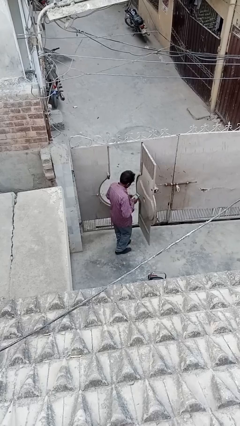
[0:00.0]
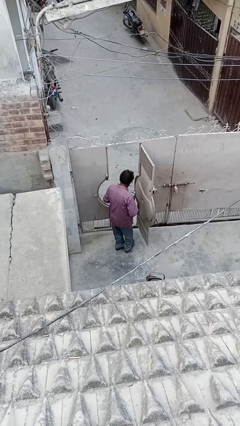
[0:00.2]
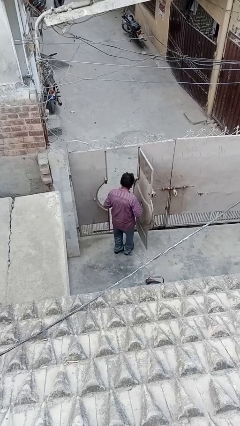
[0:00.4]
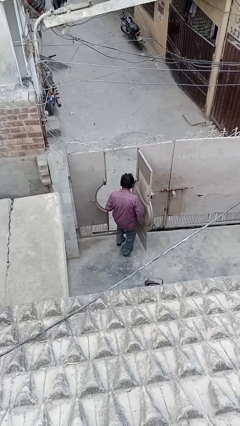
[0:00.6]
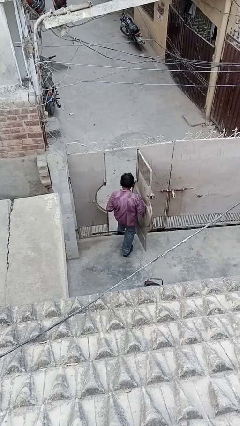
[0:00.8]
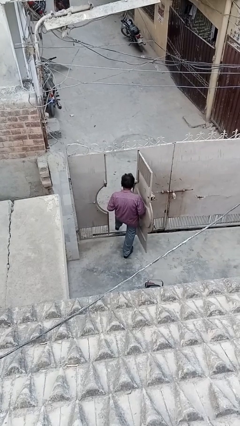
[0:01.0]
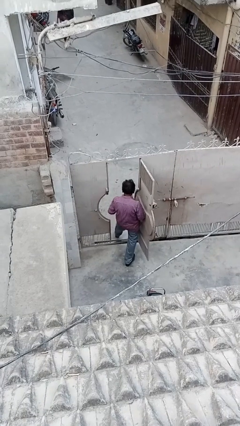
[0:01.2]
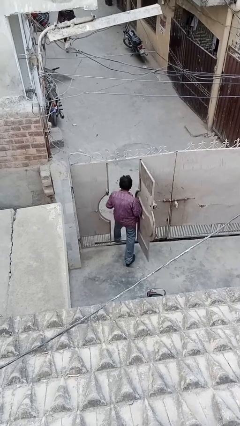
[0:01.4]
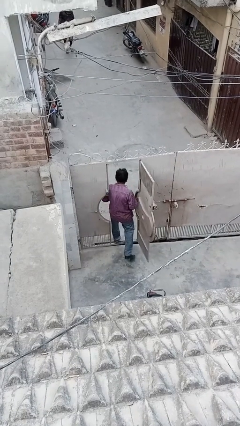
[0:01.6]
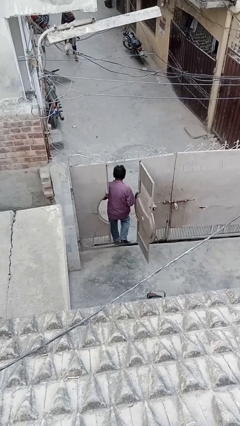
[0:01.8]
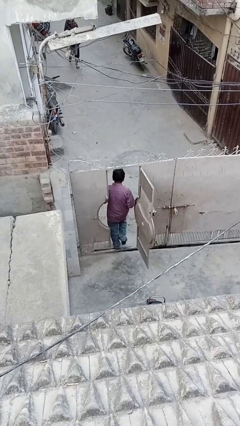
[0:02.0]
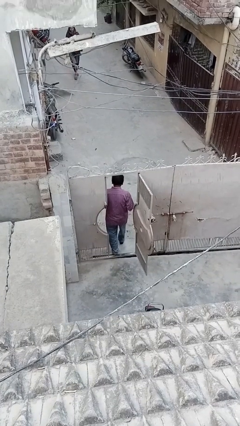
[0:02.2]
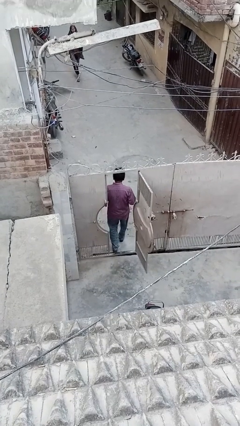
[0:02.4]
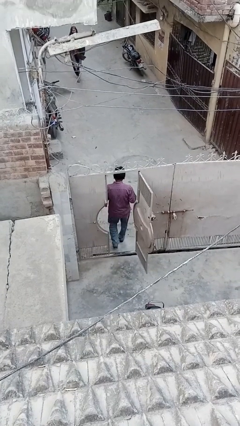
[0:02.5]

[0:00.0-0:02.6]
person exits scene through structure

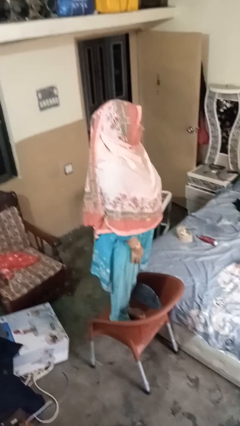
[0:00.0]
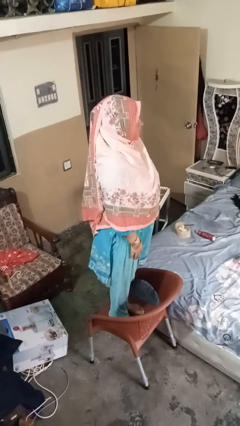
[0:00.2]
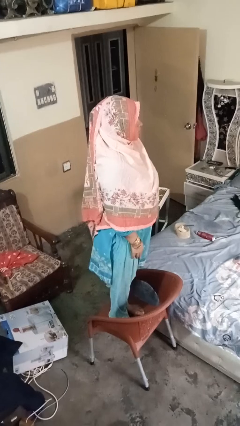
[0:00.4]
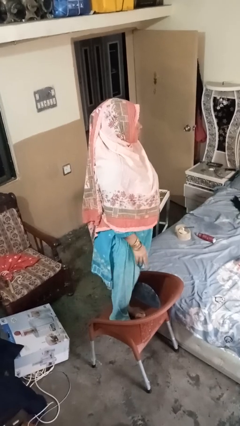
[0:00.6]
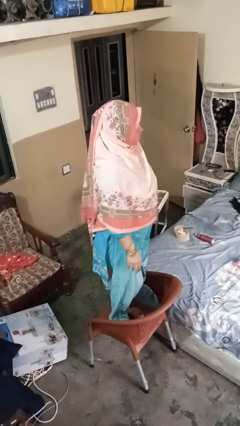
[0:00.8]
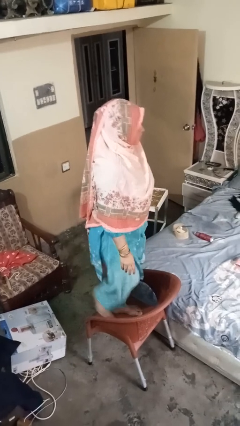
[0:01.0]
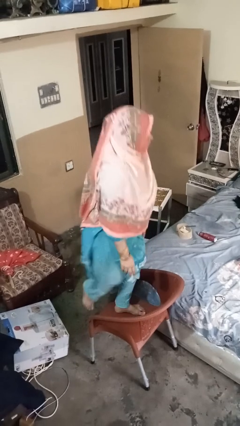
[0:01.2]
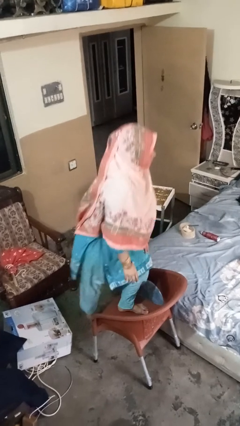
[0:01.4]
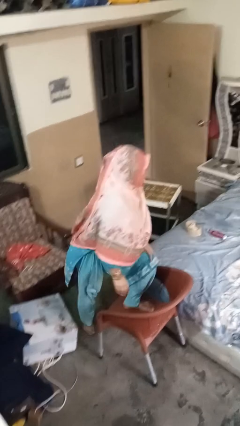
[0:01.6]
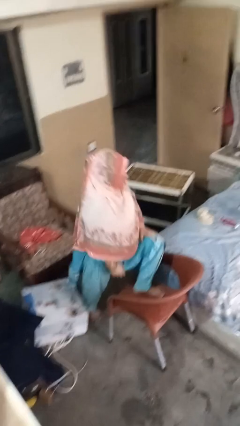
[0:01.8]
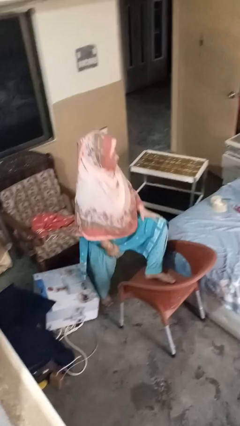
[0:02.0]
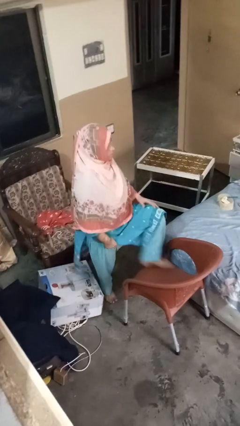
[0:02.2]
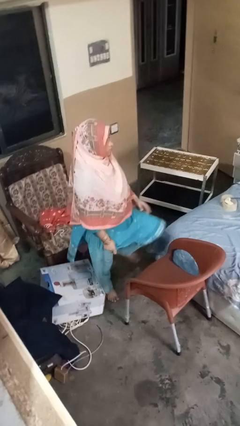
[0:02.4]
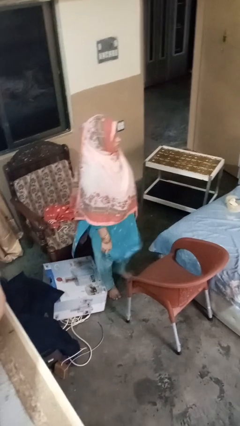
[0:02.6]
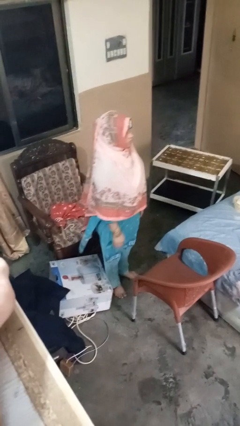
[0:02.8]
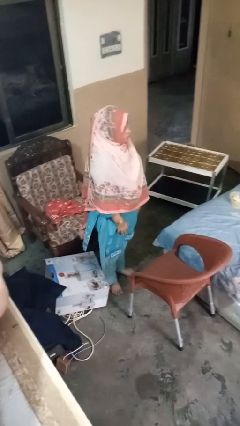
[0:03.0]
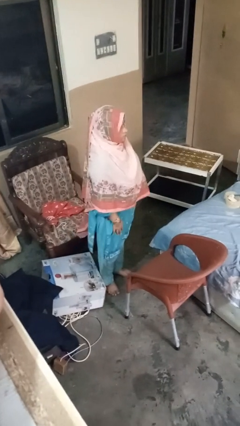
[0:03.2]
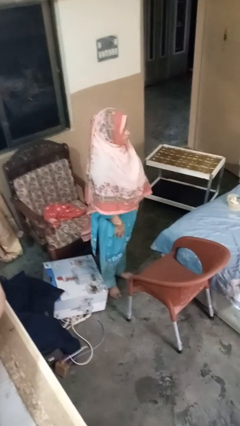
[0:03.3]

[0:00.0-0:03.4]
person climbs off chair

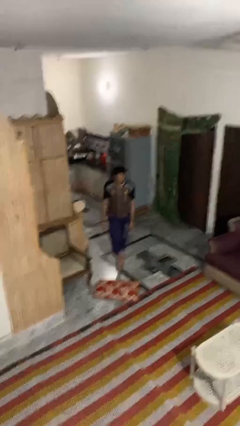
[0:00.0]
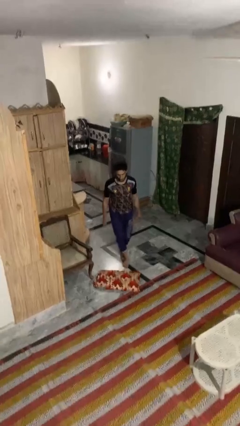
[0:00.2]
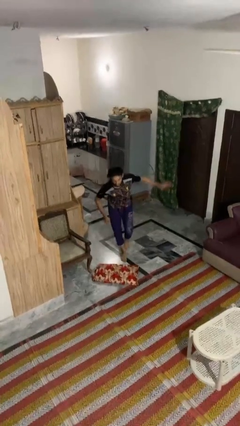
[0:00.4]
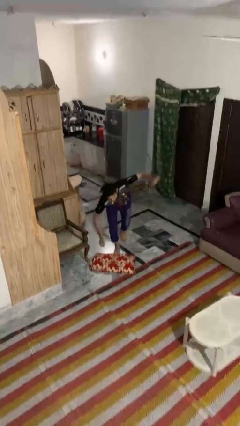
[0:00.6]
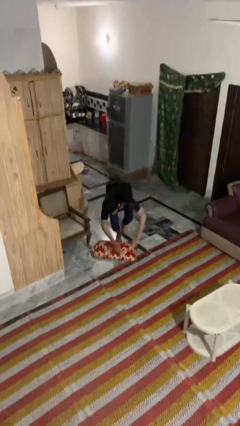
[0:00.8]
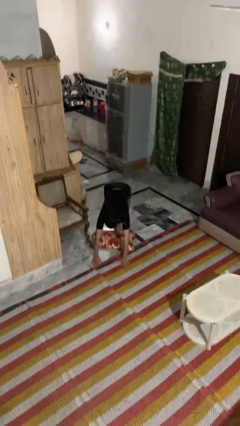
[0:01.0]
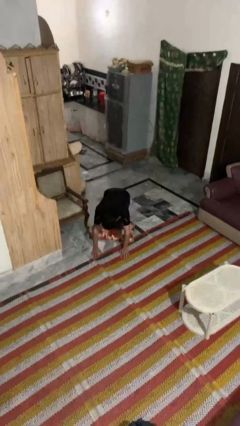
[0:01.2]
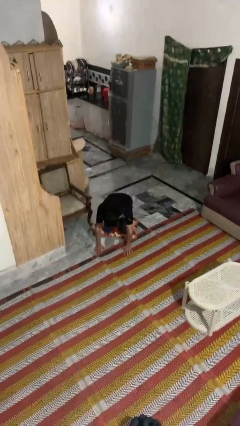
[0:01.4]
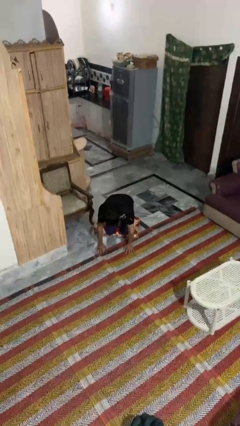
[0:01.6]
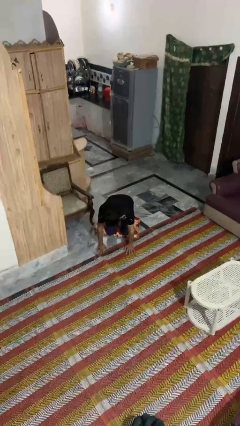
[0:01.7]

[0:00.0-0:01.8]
person trips on object on floor

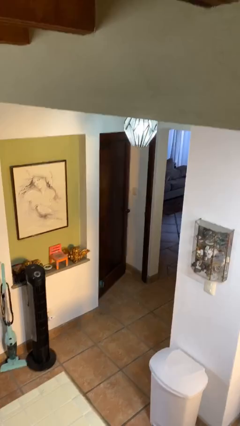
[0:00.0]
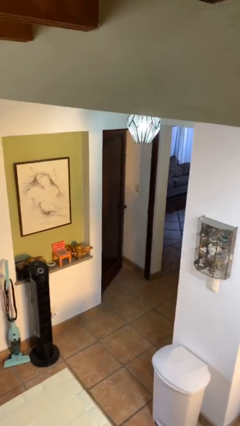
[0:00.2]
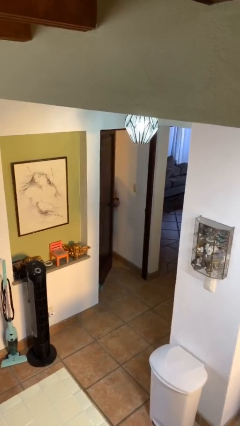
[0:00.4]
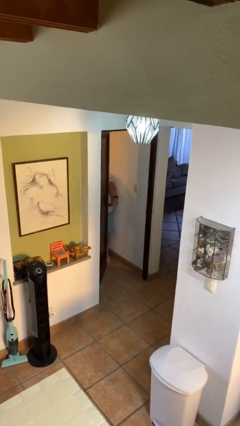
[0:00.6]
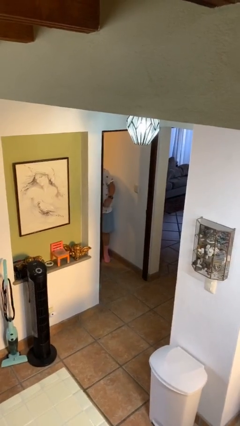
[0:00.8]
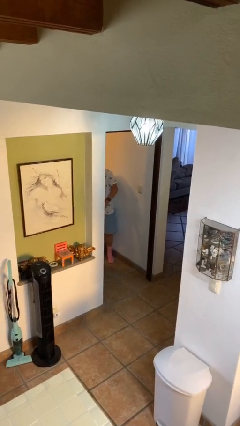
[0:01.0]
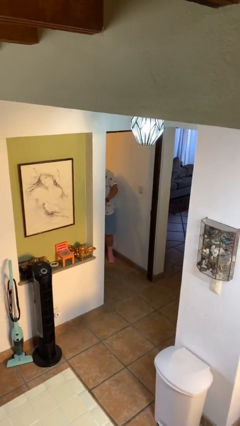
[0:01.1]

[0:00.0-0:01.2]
person opens facility door

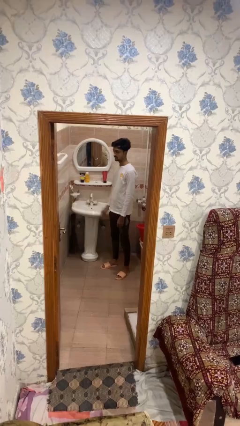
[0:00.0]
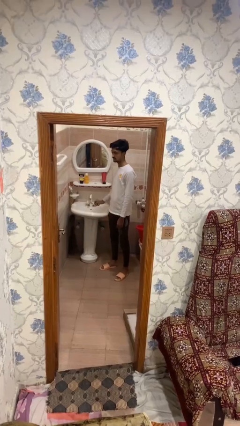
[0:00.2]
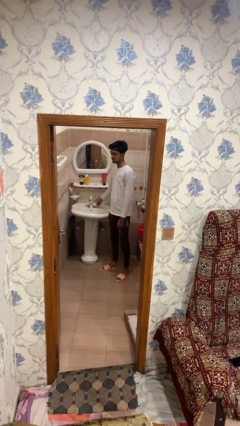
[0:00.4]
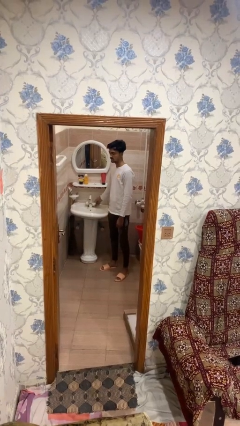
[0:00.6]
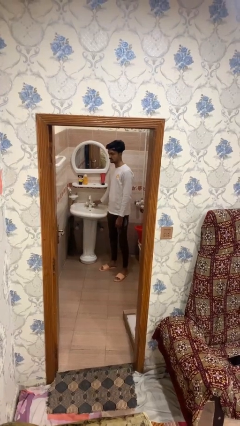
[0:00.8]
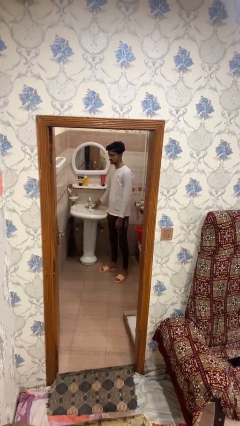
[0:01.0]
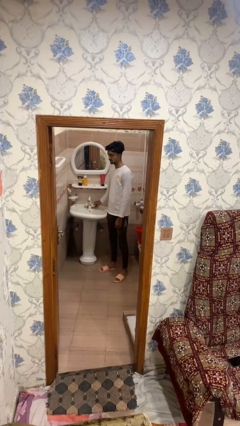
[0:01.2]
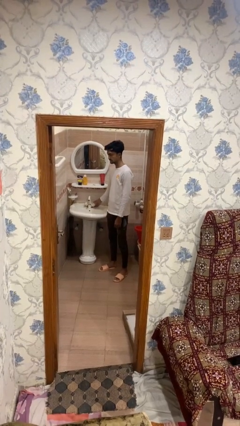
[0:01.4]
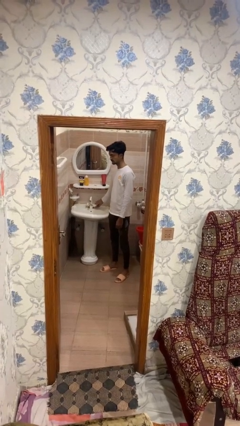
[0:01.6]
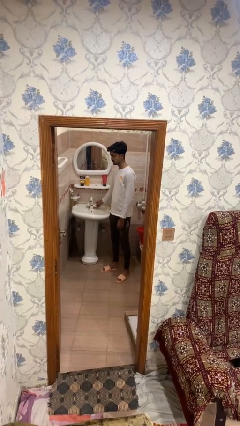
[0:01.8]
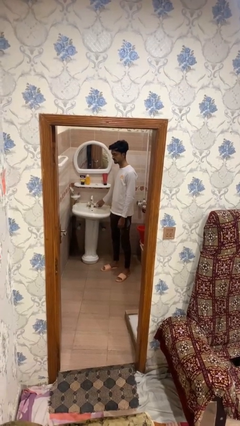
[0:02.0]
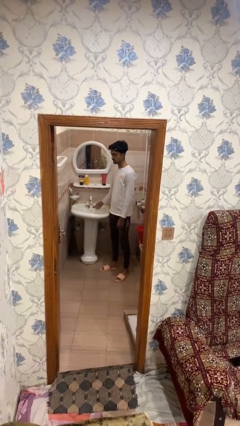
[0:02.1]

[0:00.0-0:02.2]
person turns on faucet

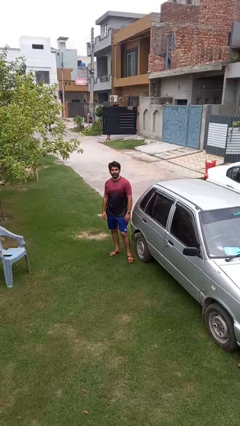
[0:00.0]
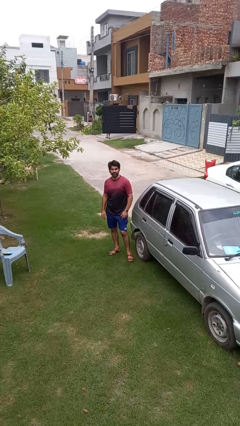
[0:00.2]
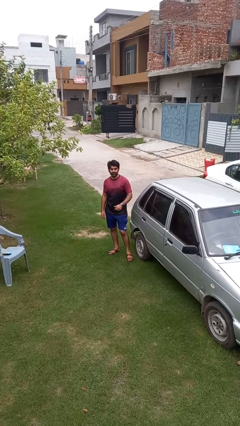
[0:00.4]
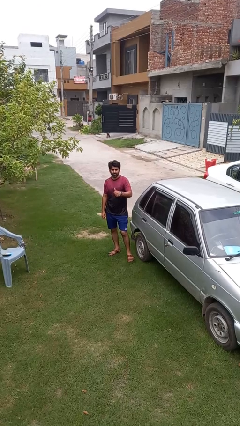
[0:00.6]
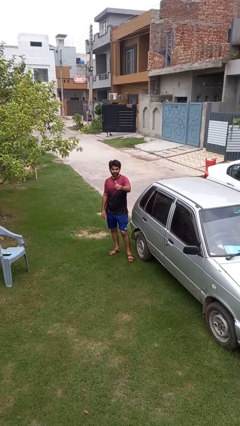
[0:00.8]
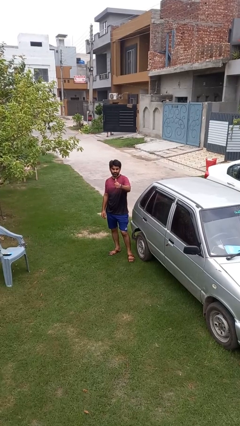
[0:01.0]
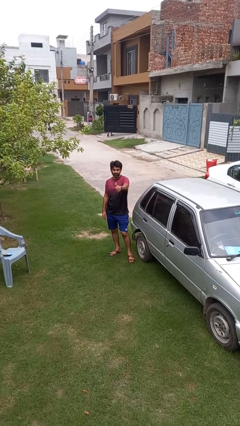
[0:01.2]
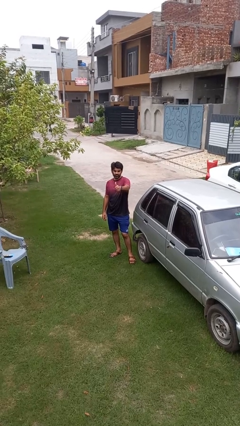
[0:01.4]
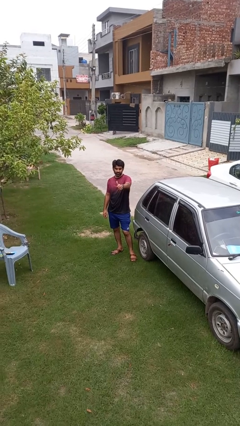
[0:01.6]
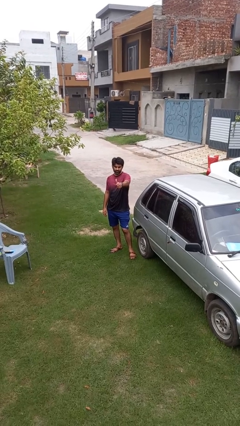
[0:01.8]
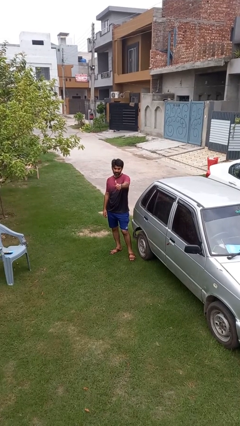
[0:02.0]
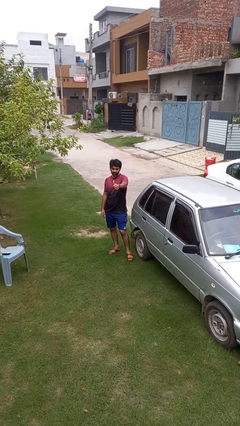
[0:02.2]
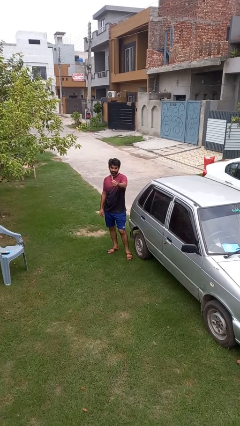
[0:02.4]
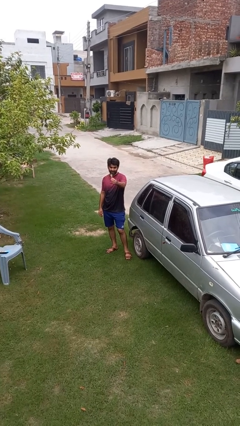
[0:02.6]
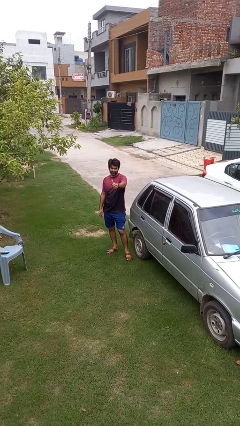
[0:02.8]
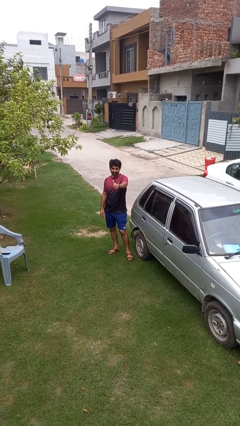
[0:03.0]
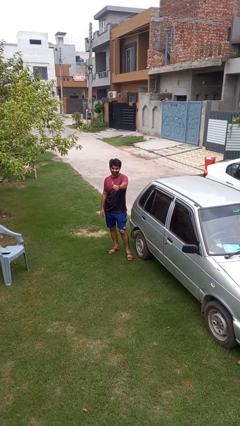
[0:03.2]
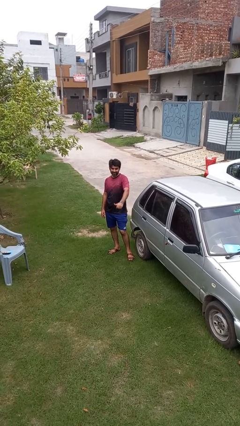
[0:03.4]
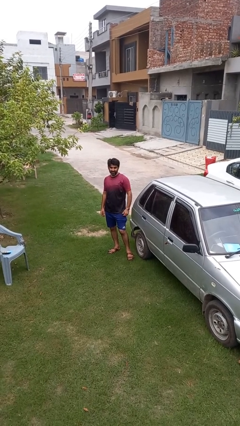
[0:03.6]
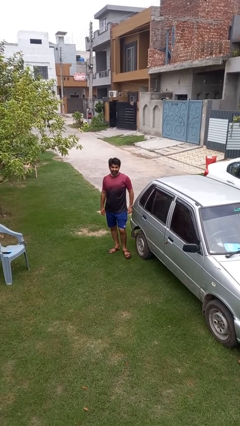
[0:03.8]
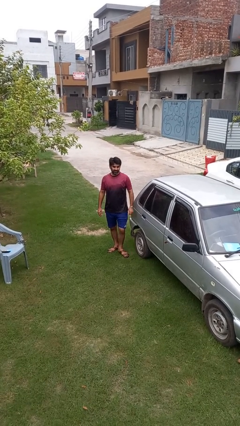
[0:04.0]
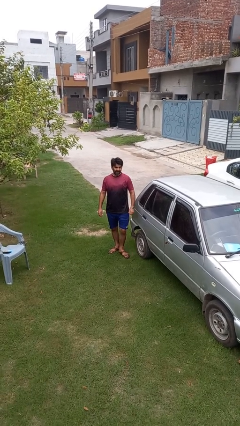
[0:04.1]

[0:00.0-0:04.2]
person gestures thumbs up

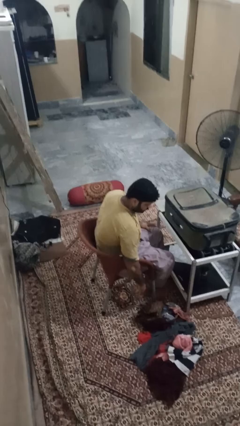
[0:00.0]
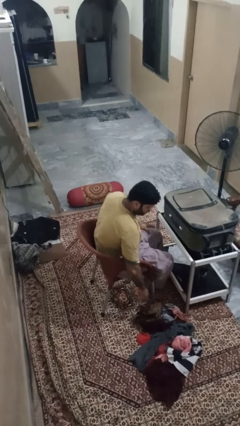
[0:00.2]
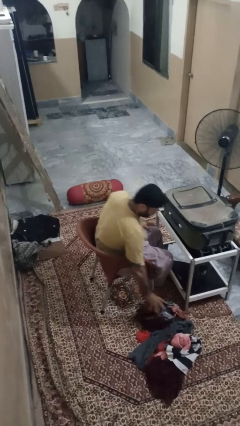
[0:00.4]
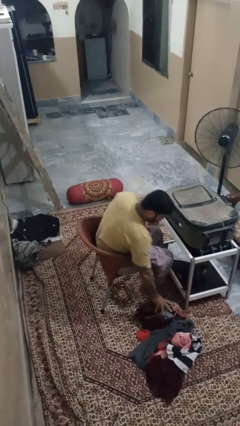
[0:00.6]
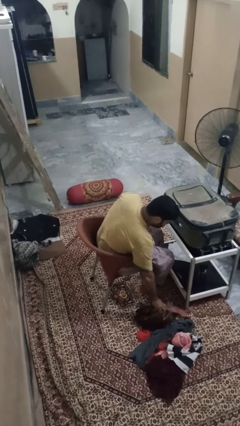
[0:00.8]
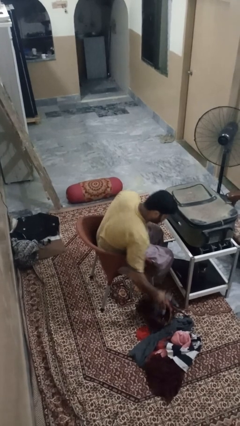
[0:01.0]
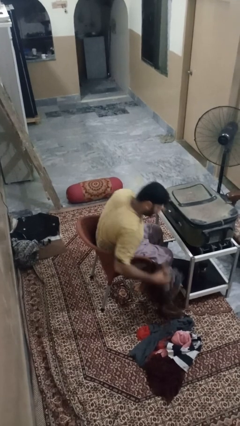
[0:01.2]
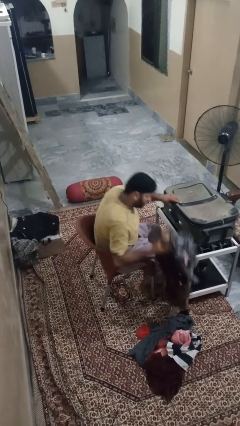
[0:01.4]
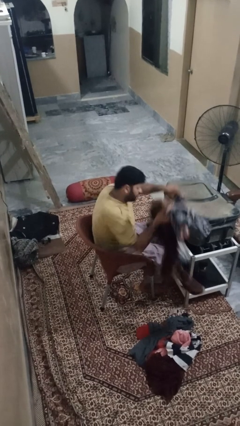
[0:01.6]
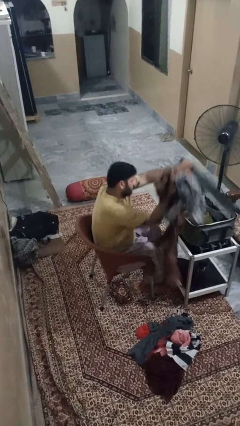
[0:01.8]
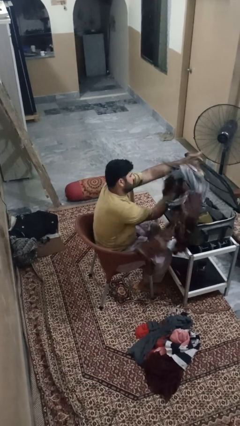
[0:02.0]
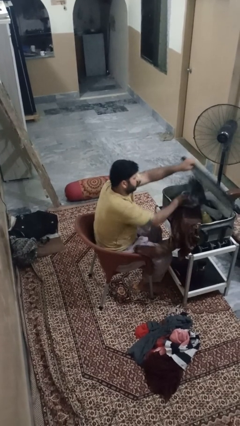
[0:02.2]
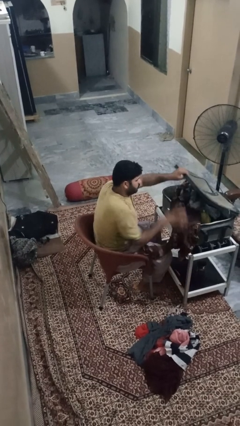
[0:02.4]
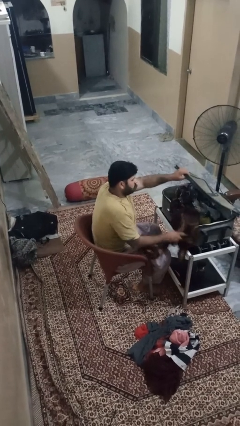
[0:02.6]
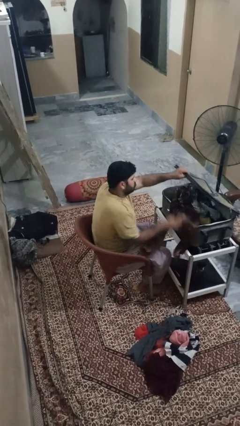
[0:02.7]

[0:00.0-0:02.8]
person loads clothes into suitcase
